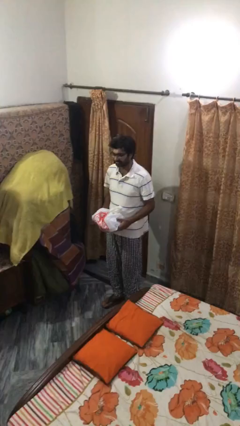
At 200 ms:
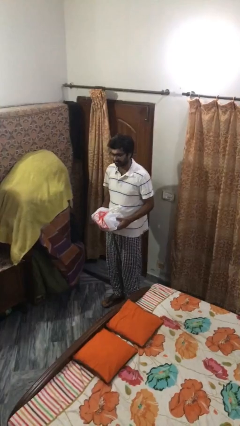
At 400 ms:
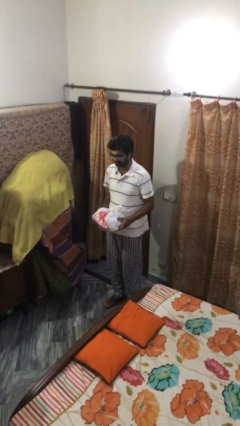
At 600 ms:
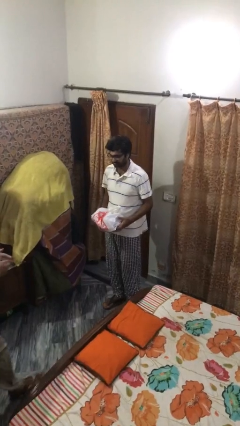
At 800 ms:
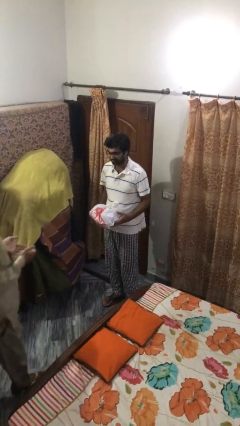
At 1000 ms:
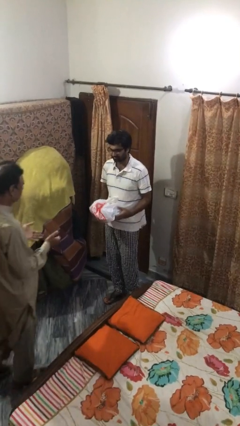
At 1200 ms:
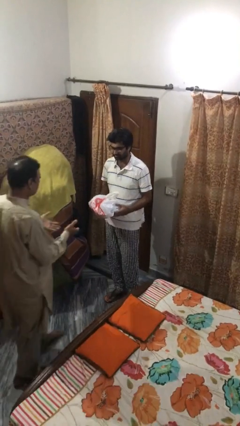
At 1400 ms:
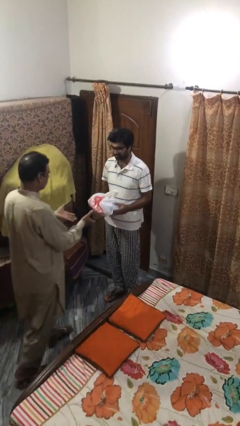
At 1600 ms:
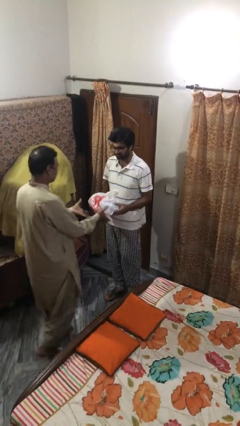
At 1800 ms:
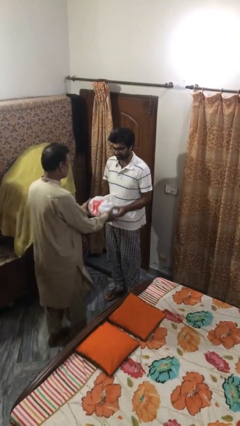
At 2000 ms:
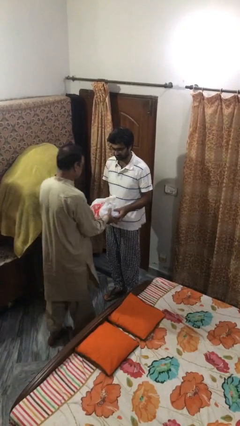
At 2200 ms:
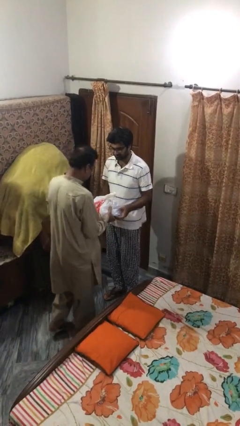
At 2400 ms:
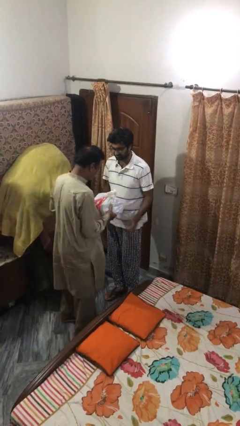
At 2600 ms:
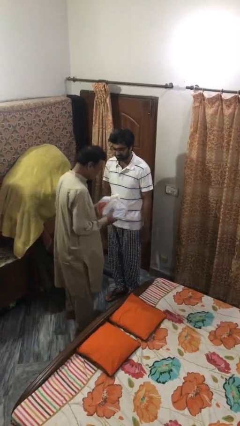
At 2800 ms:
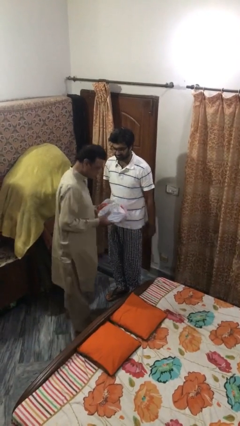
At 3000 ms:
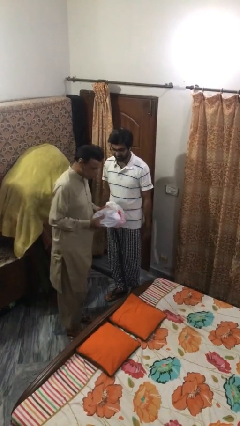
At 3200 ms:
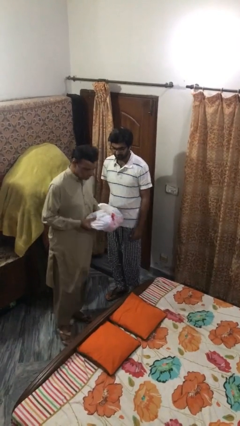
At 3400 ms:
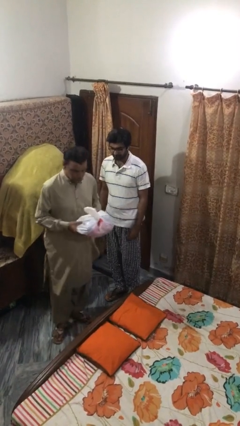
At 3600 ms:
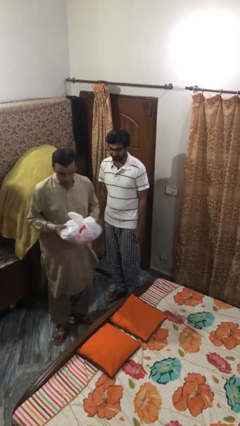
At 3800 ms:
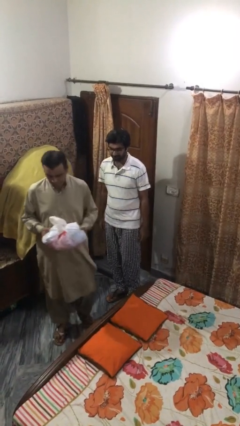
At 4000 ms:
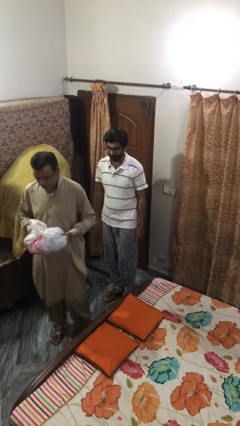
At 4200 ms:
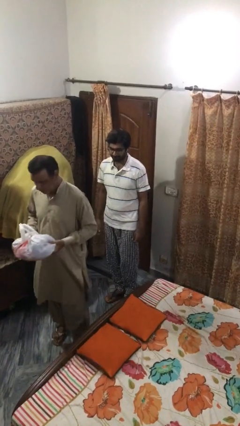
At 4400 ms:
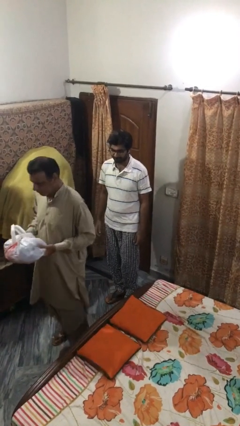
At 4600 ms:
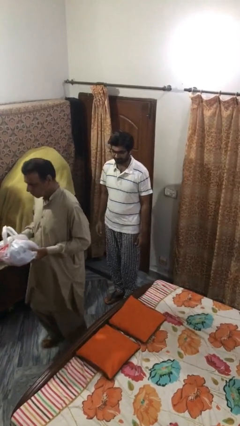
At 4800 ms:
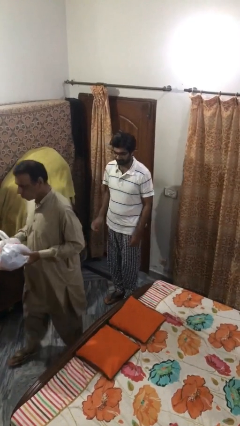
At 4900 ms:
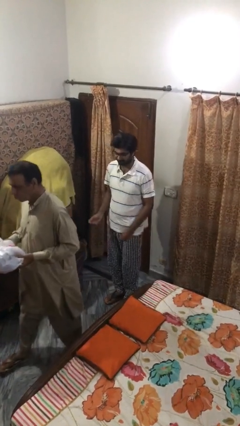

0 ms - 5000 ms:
person transfers object to person

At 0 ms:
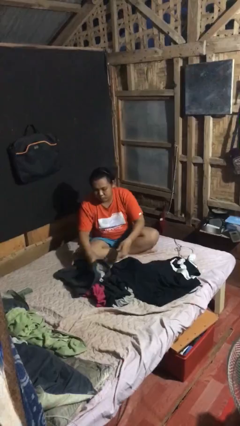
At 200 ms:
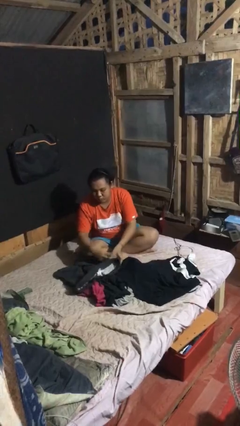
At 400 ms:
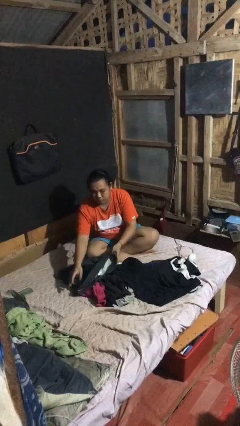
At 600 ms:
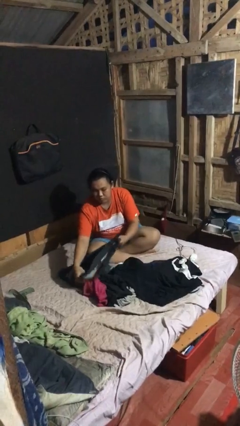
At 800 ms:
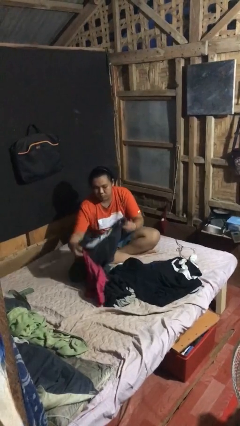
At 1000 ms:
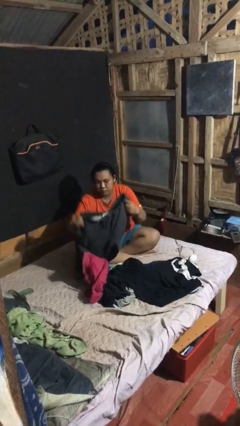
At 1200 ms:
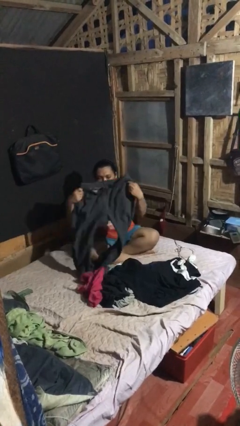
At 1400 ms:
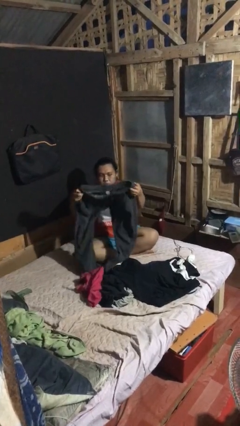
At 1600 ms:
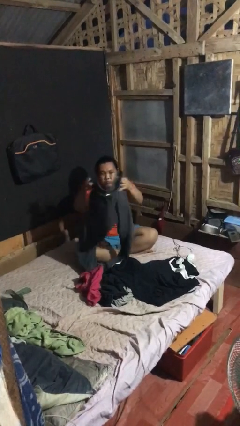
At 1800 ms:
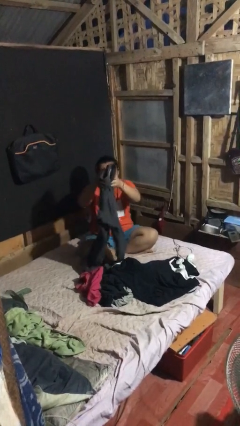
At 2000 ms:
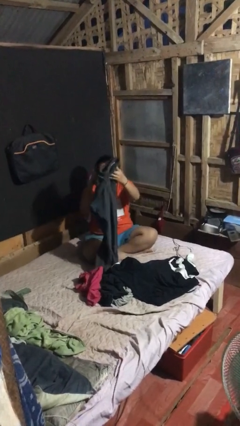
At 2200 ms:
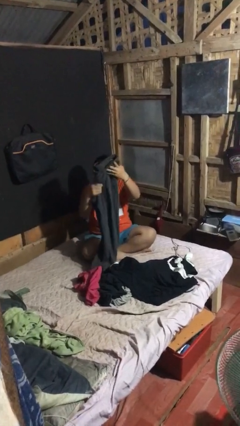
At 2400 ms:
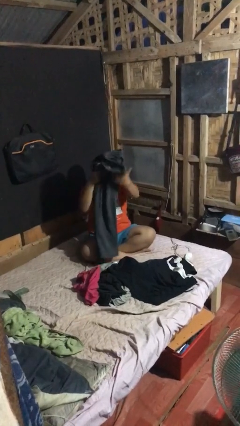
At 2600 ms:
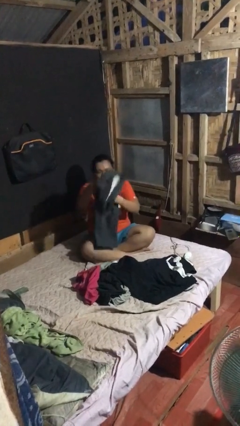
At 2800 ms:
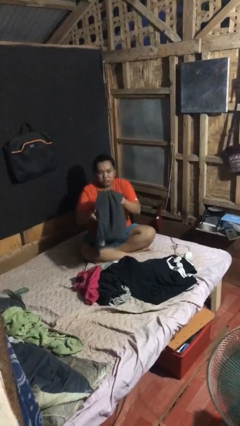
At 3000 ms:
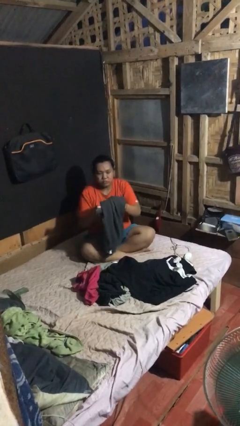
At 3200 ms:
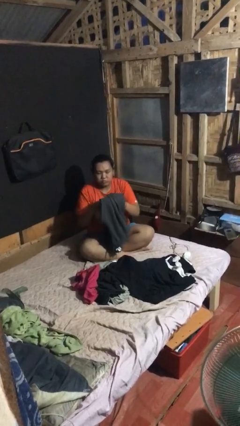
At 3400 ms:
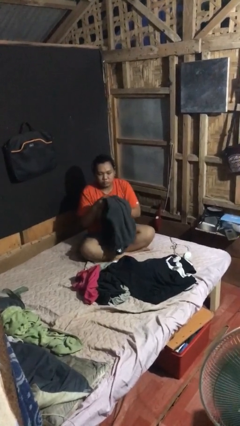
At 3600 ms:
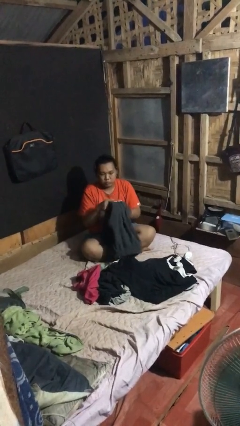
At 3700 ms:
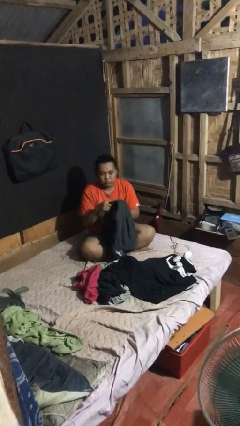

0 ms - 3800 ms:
person folds pants

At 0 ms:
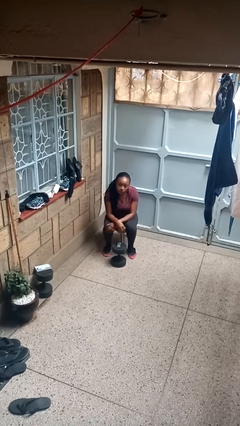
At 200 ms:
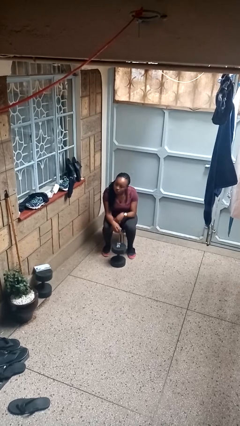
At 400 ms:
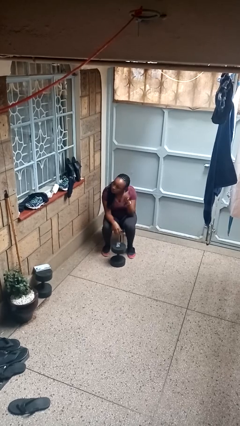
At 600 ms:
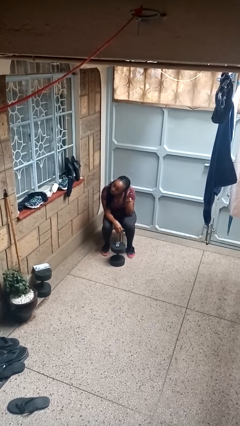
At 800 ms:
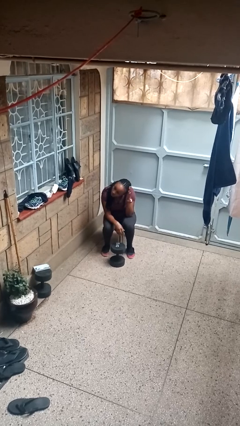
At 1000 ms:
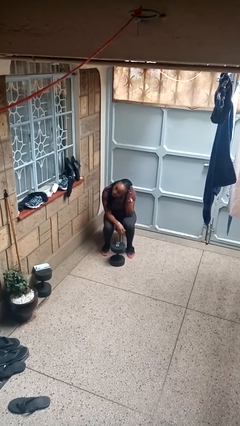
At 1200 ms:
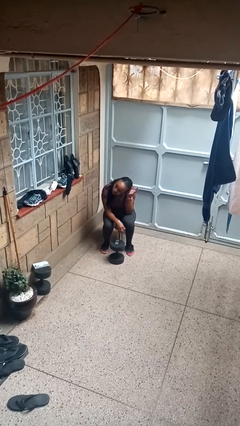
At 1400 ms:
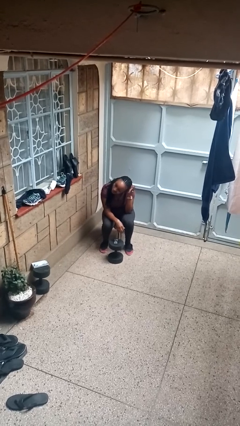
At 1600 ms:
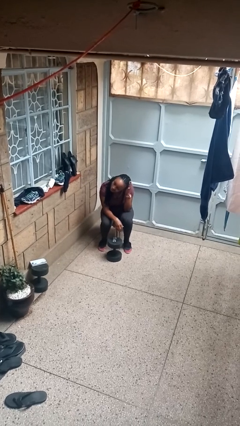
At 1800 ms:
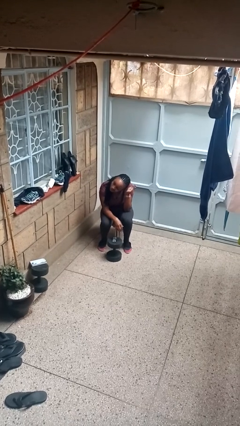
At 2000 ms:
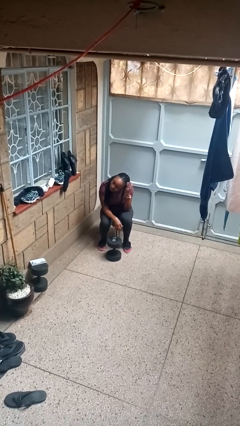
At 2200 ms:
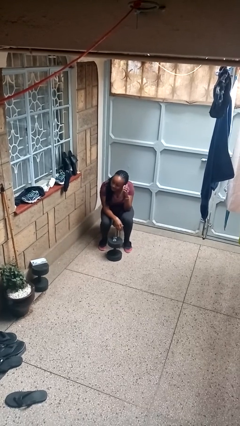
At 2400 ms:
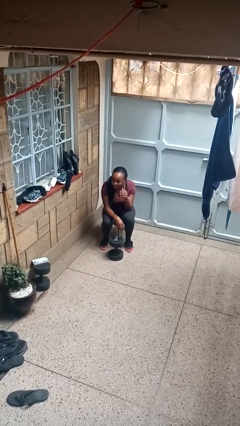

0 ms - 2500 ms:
person pats head

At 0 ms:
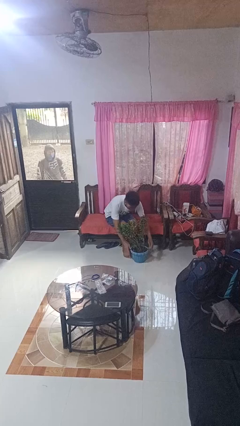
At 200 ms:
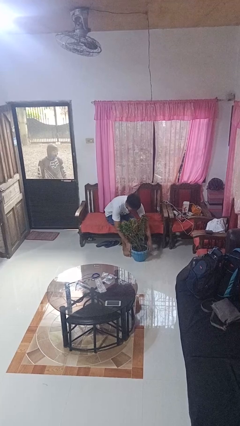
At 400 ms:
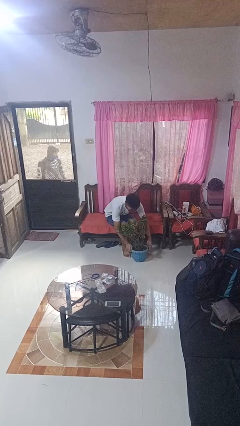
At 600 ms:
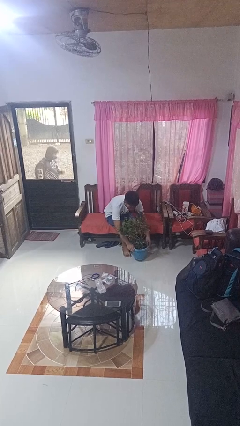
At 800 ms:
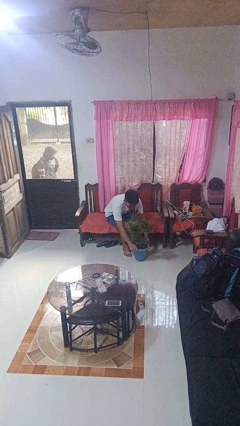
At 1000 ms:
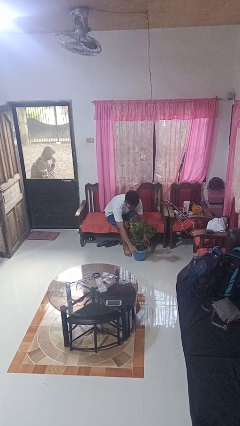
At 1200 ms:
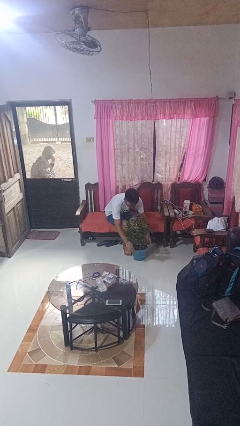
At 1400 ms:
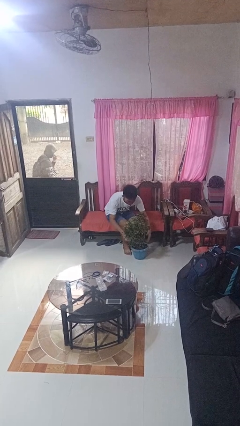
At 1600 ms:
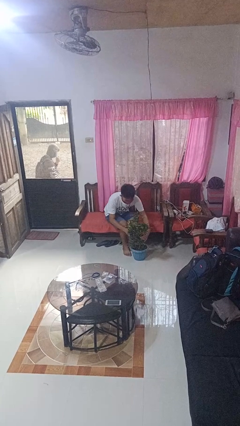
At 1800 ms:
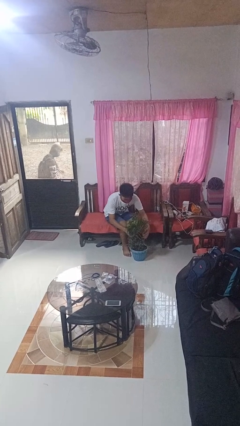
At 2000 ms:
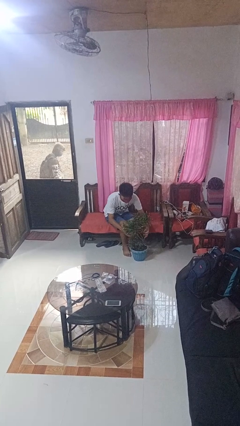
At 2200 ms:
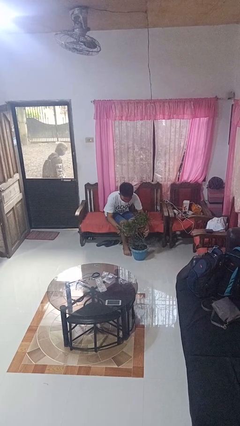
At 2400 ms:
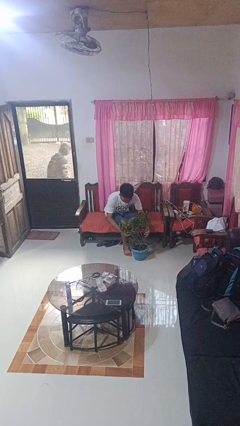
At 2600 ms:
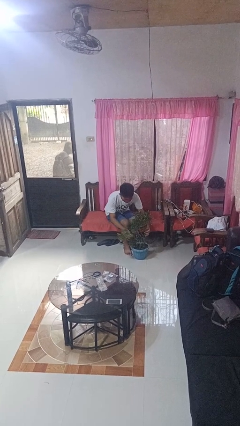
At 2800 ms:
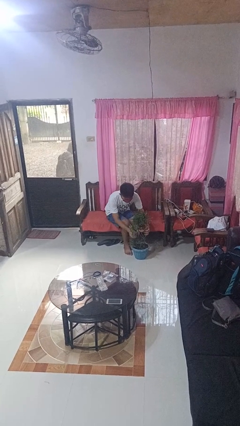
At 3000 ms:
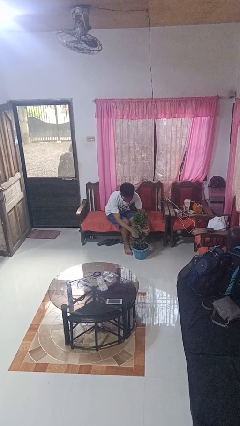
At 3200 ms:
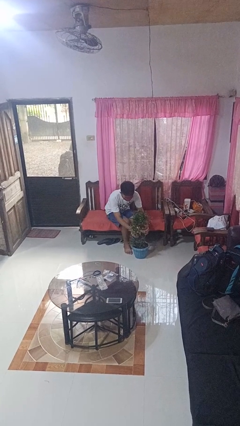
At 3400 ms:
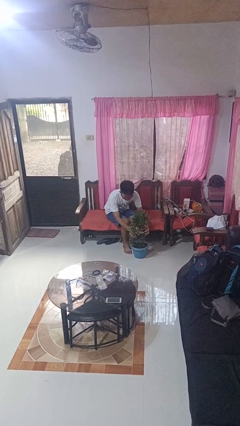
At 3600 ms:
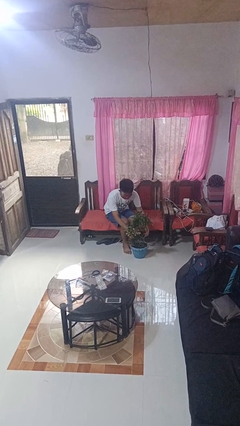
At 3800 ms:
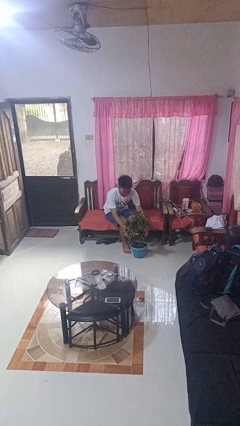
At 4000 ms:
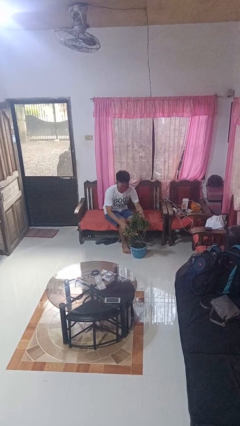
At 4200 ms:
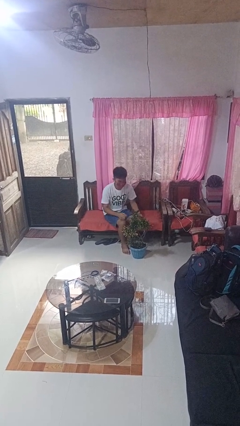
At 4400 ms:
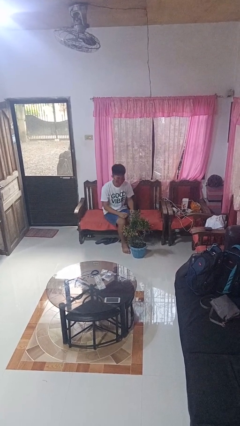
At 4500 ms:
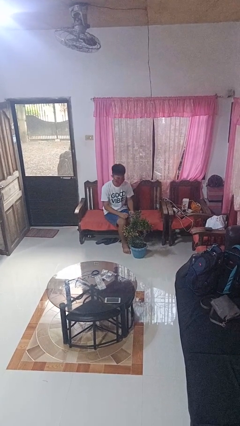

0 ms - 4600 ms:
person arranges flowers in vase

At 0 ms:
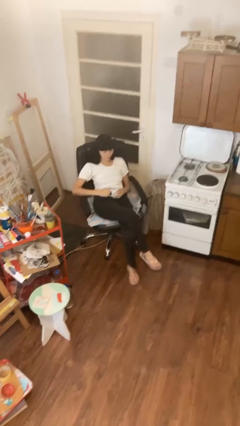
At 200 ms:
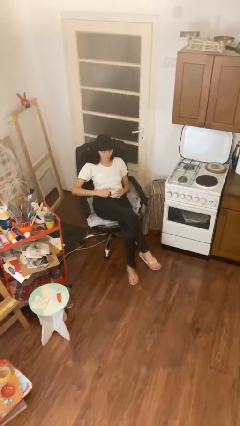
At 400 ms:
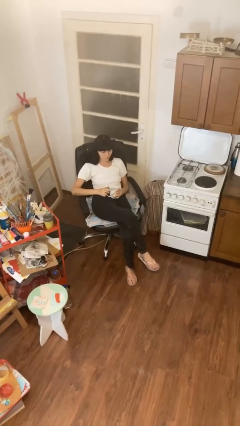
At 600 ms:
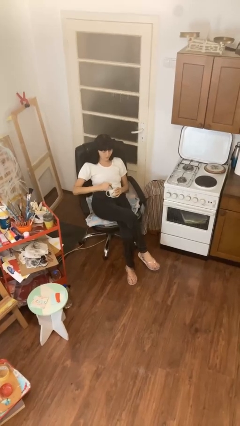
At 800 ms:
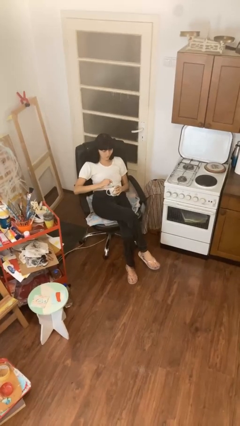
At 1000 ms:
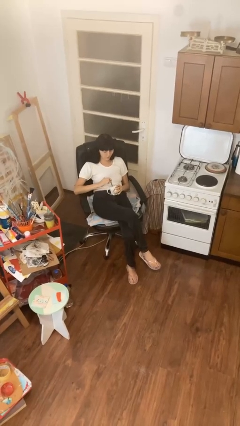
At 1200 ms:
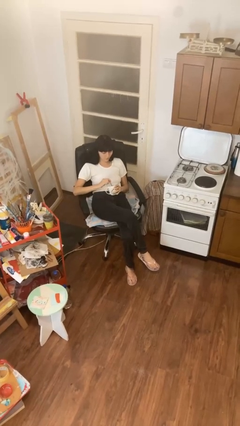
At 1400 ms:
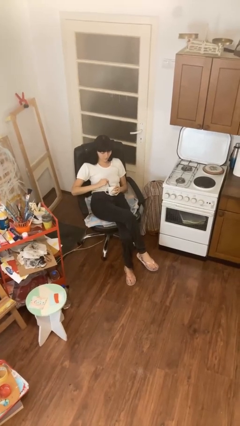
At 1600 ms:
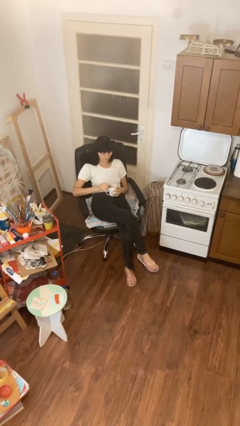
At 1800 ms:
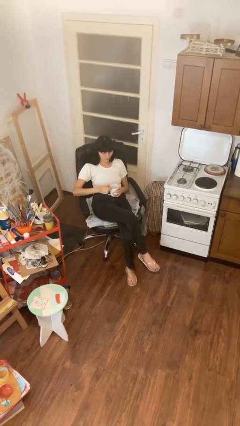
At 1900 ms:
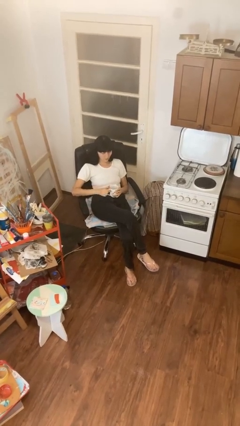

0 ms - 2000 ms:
person stirs mug
